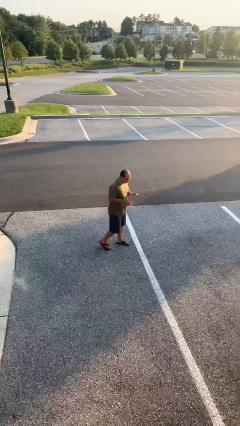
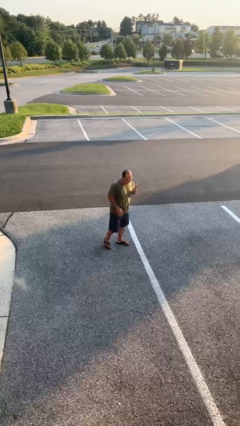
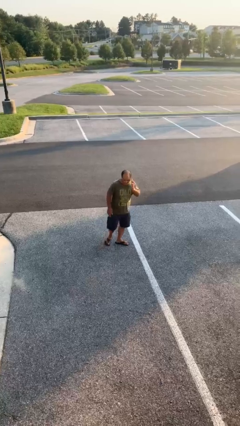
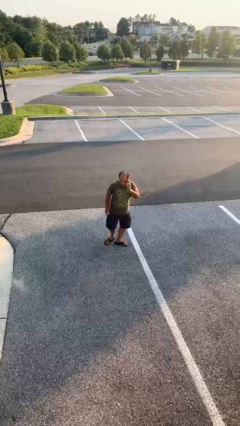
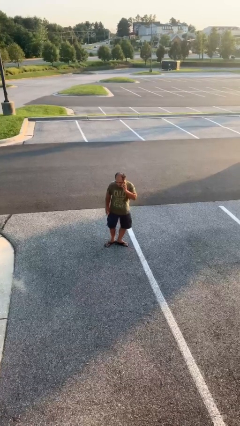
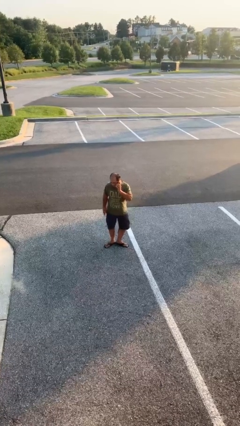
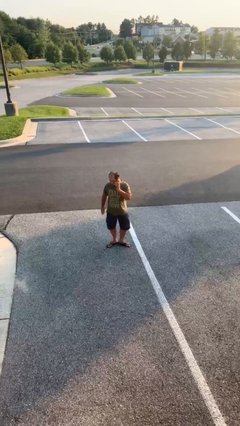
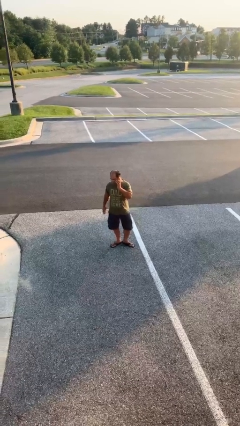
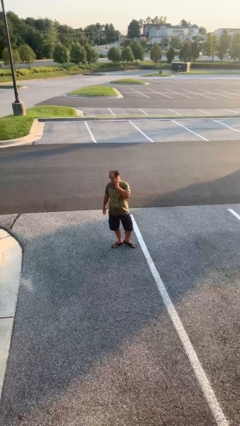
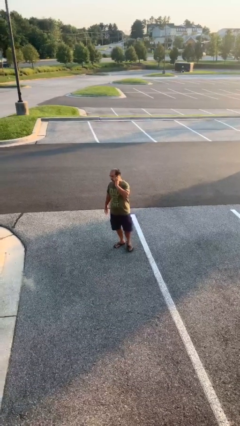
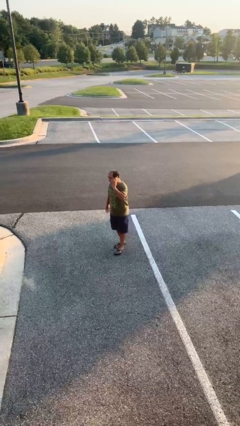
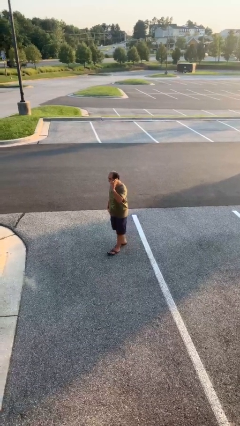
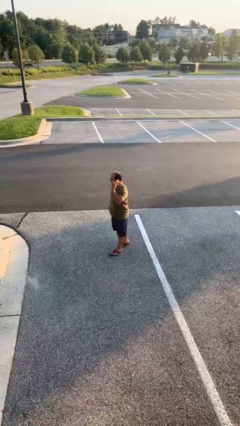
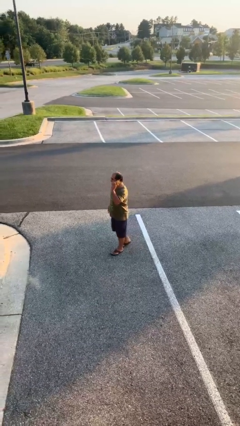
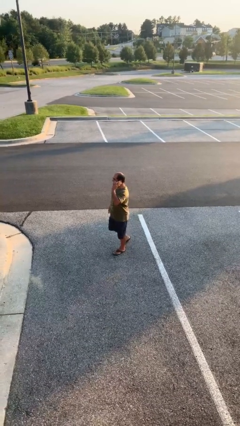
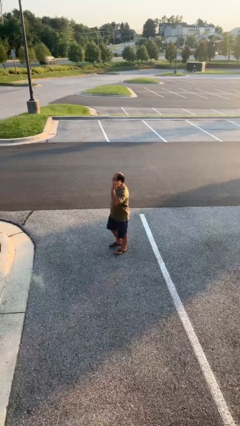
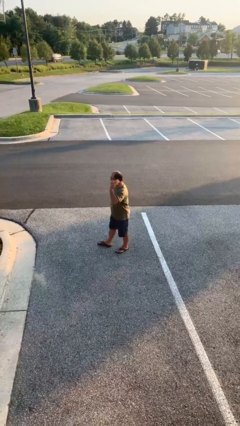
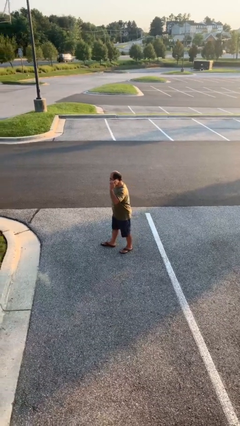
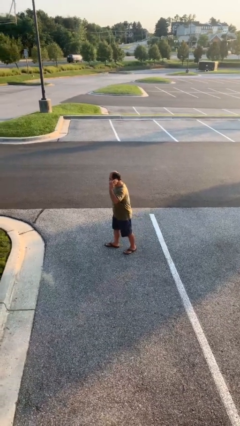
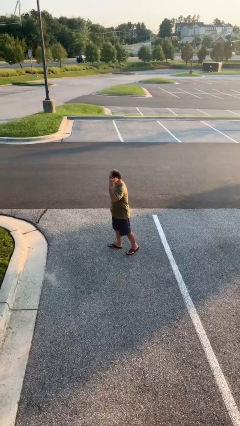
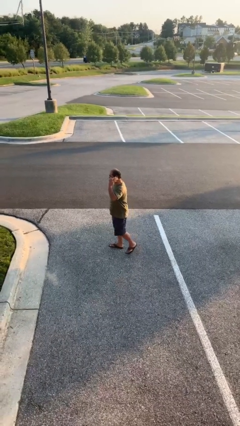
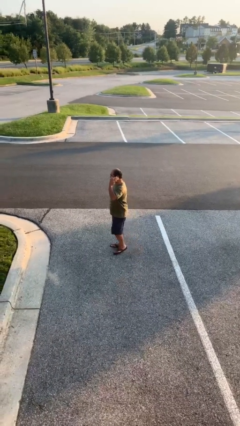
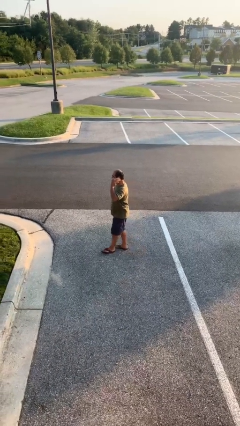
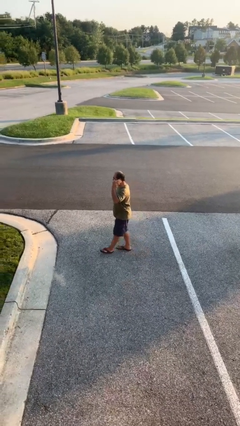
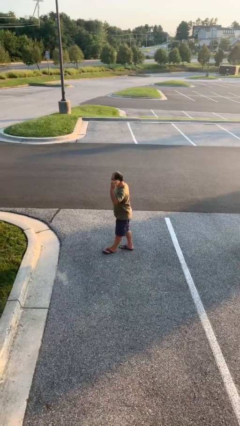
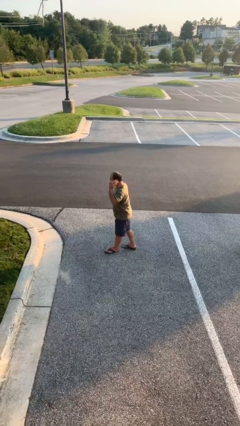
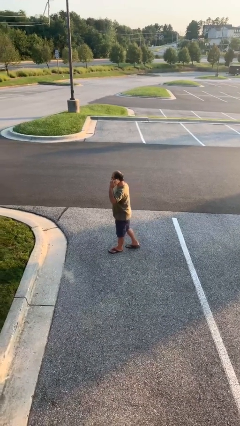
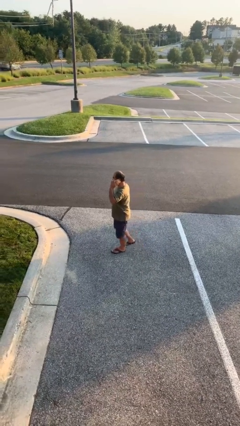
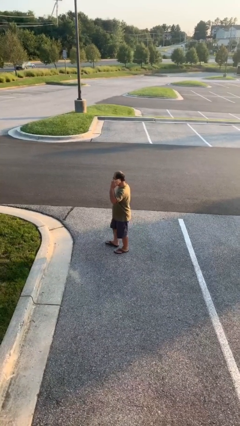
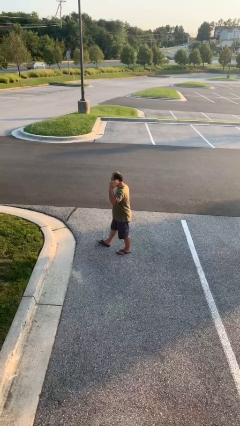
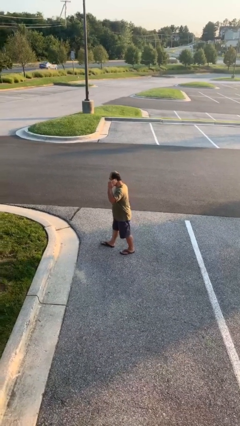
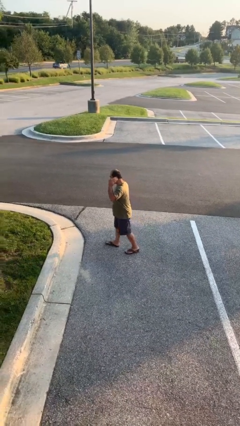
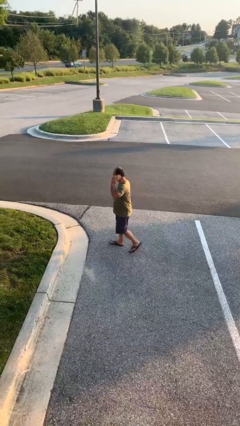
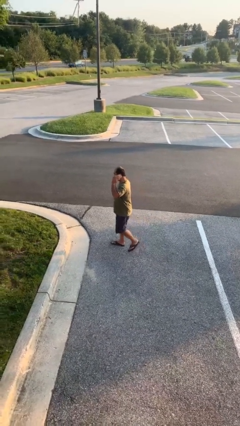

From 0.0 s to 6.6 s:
person talks on phone

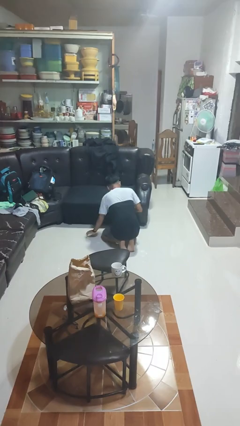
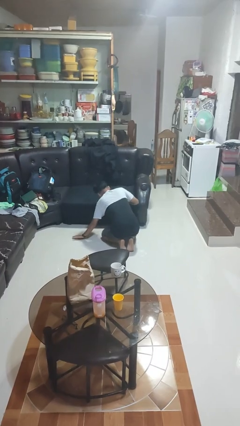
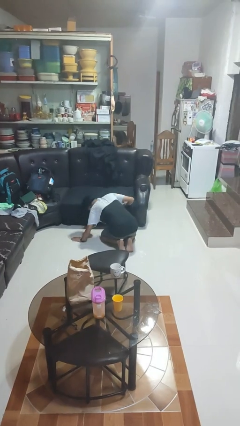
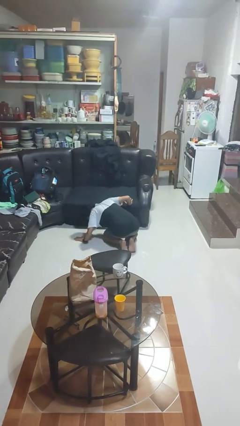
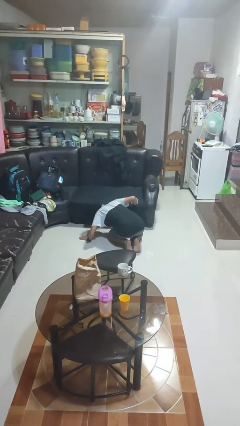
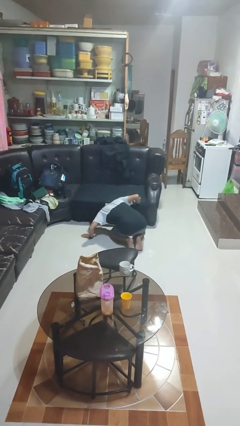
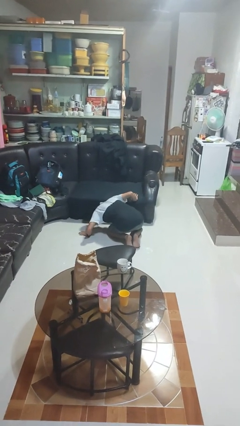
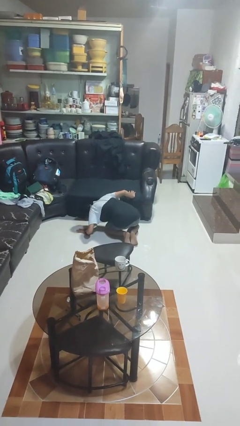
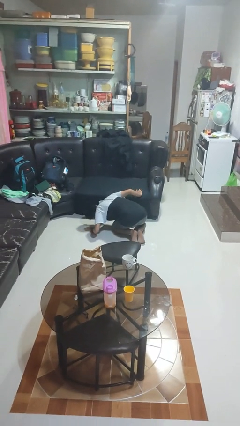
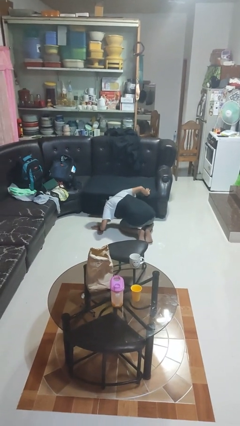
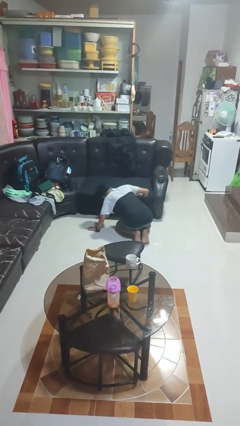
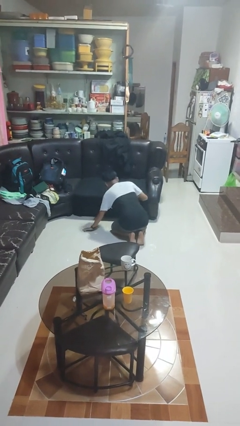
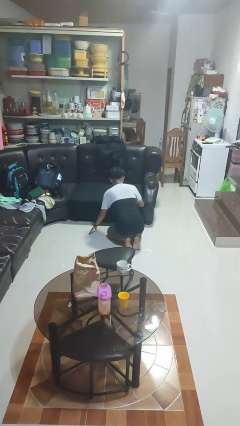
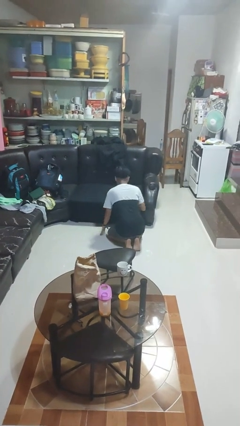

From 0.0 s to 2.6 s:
person searches under couch

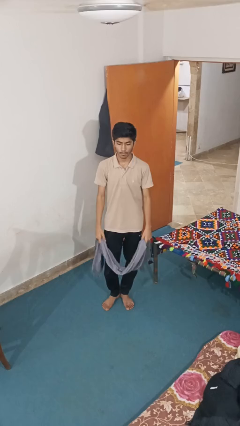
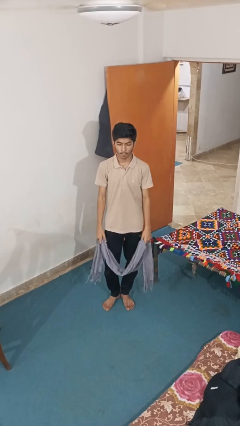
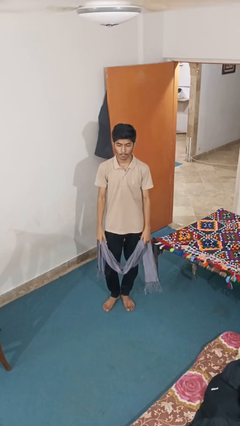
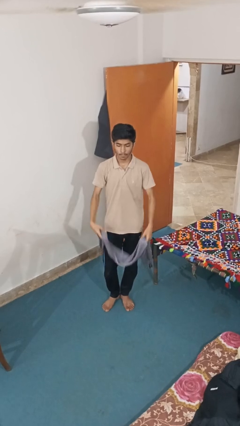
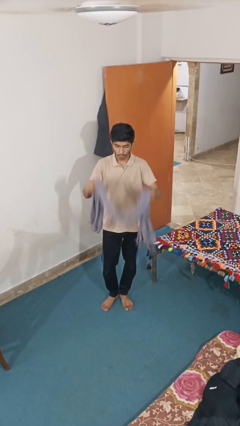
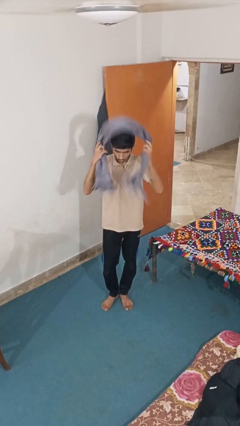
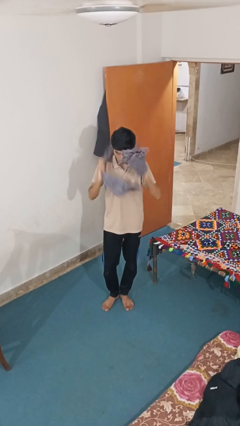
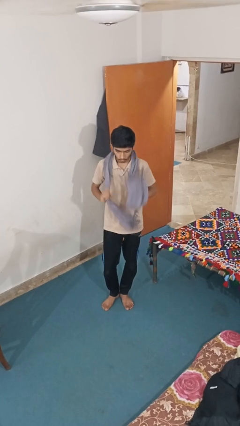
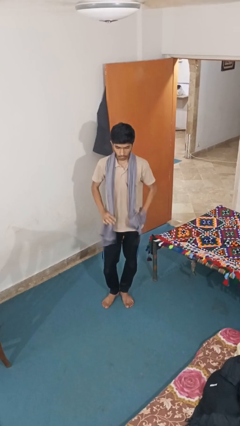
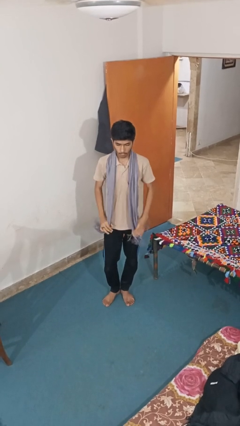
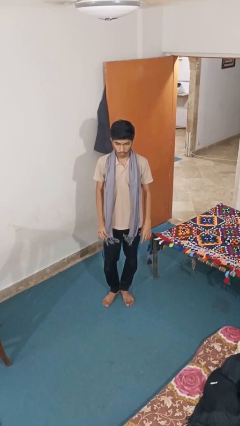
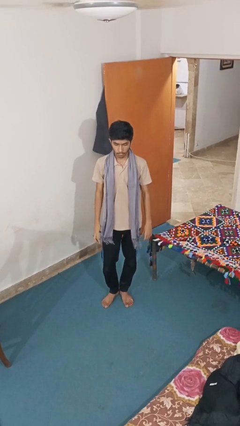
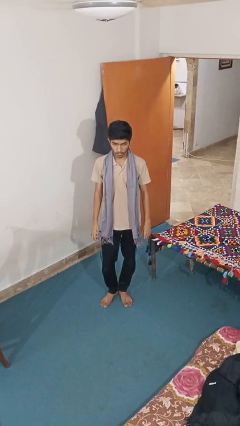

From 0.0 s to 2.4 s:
person puts on scarf

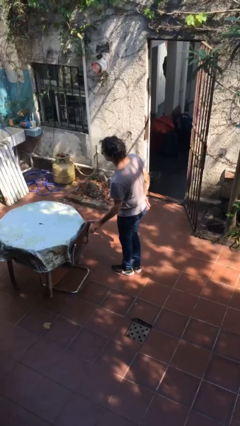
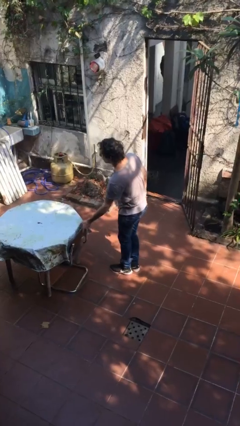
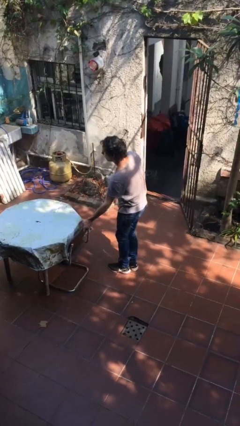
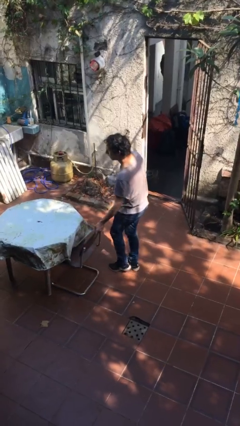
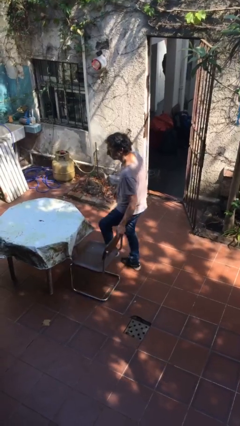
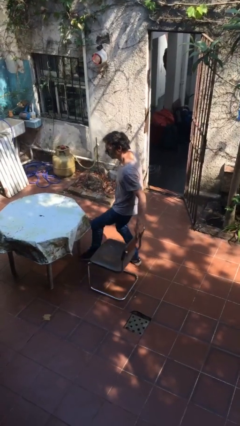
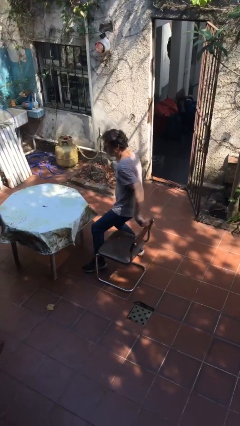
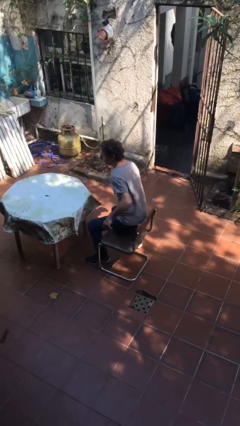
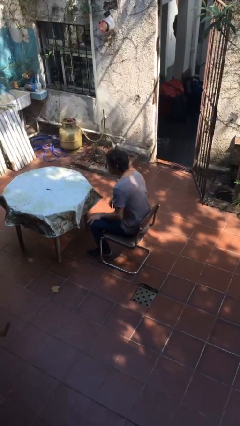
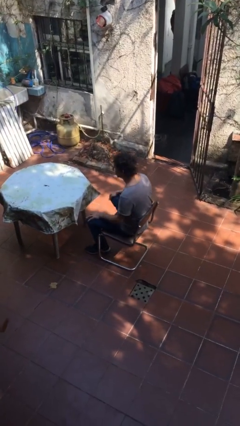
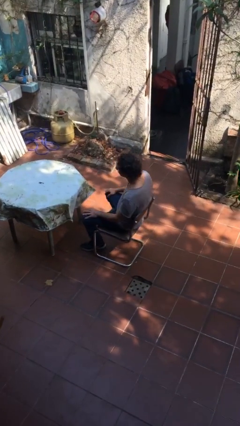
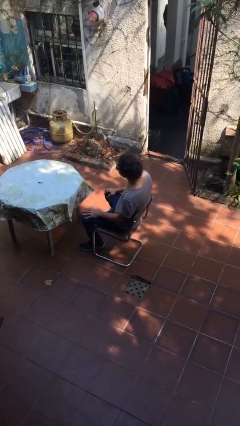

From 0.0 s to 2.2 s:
person sits down

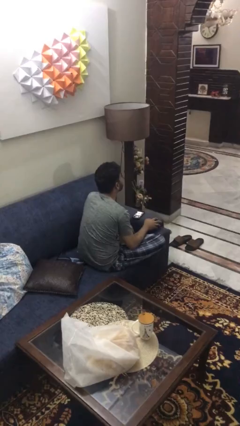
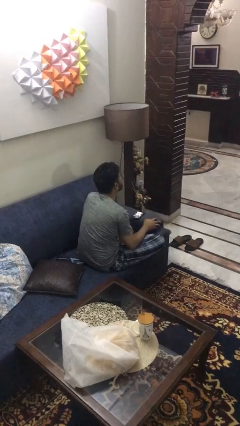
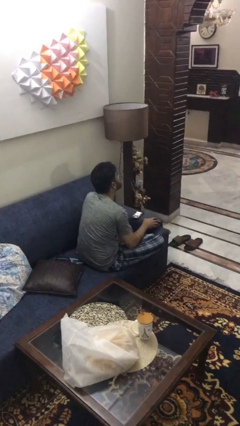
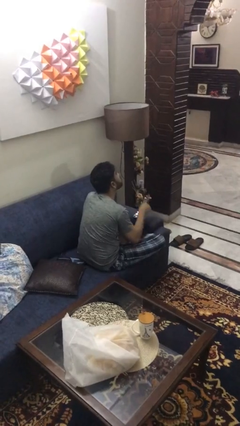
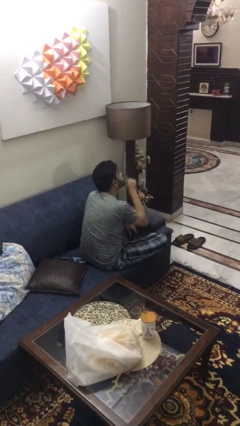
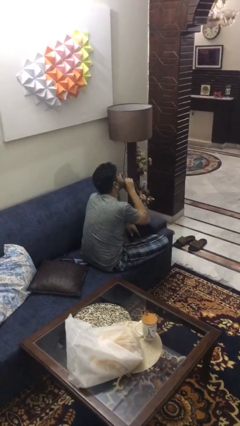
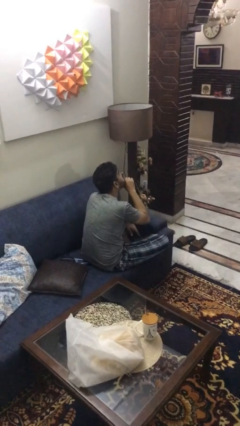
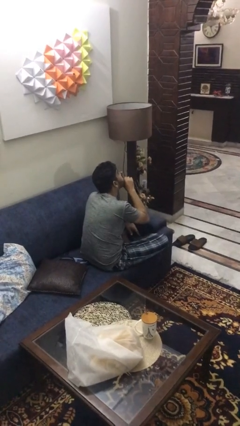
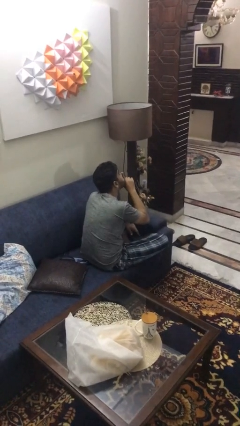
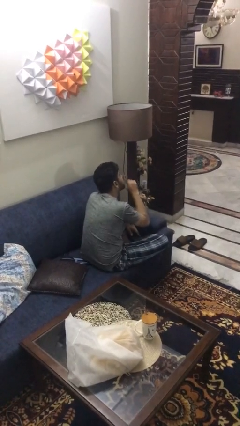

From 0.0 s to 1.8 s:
person gestures be quiet

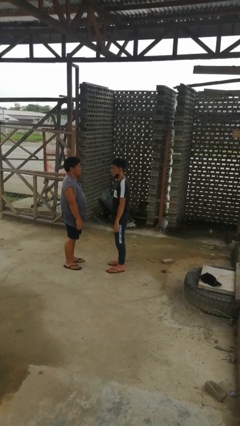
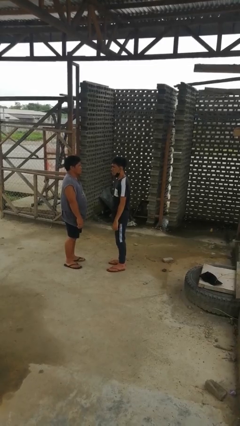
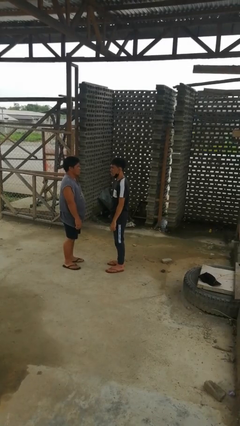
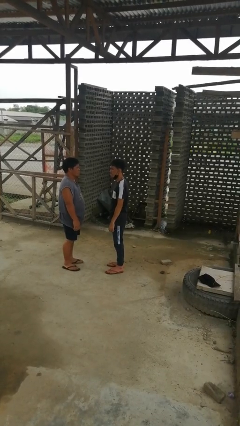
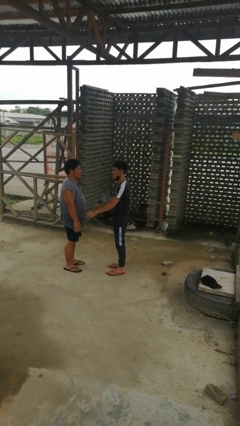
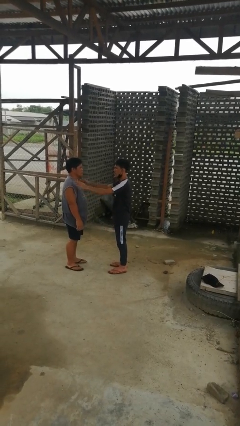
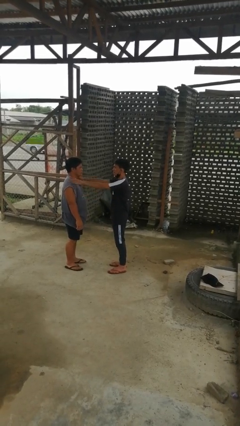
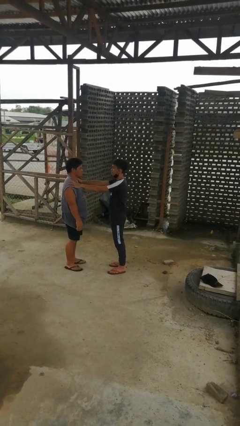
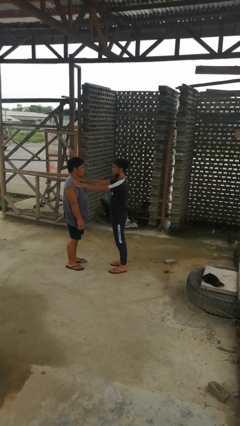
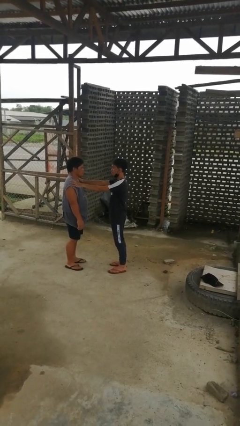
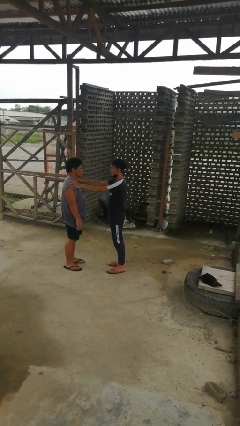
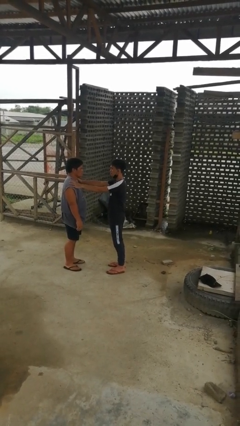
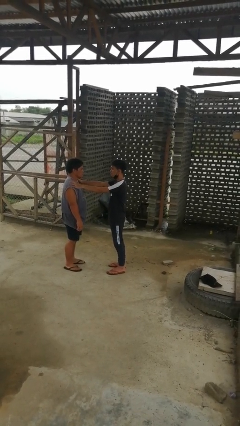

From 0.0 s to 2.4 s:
person grabs person by shoulder
